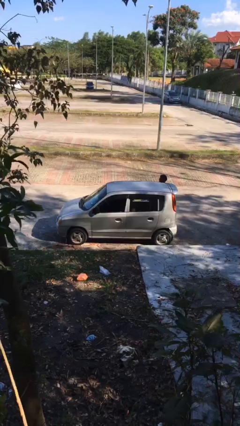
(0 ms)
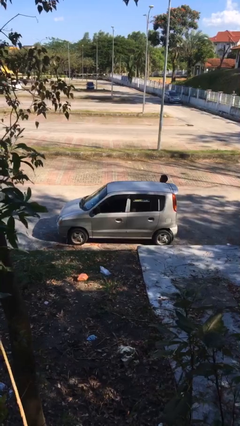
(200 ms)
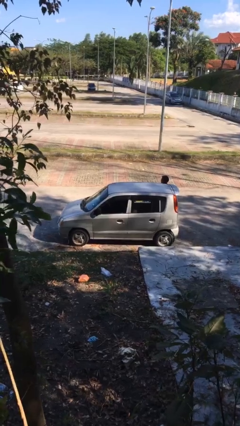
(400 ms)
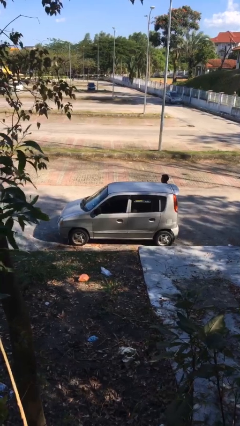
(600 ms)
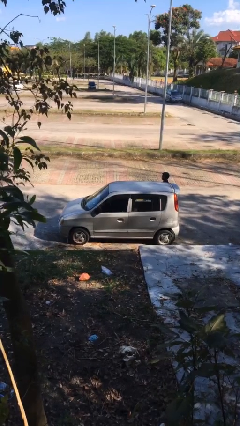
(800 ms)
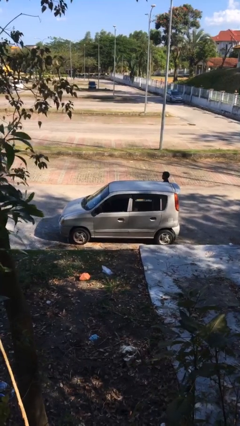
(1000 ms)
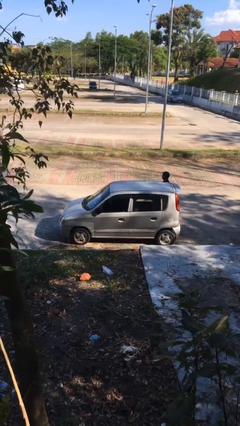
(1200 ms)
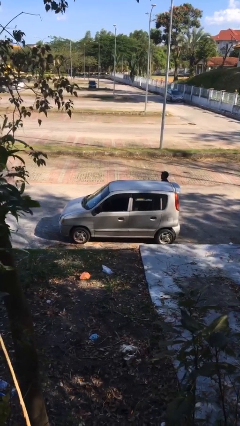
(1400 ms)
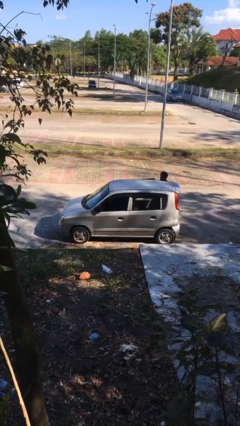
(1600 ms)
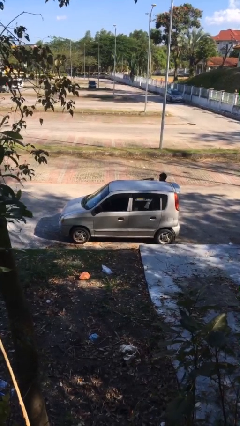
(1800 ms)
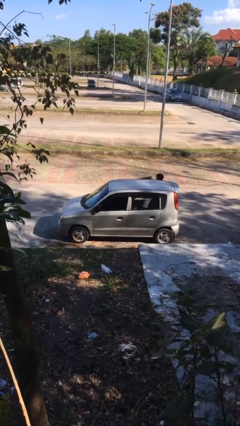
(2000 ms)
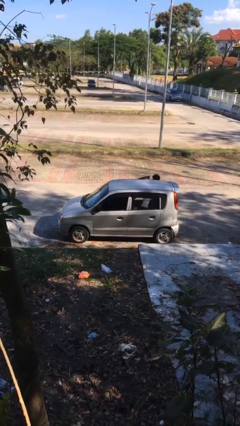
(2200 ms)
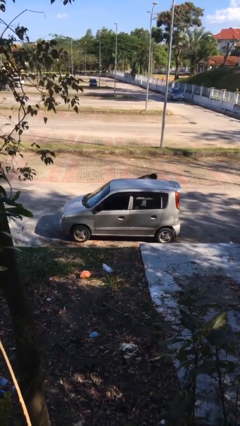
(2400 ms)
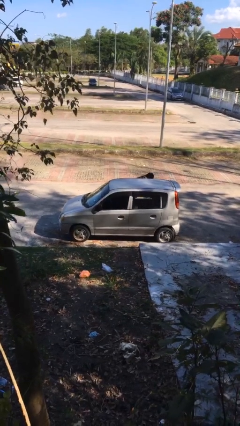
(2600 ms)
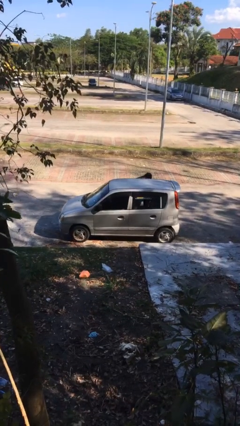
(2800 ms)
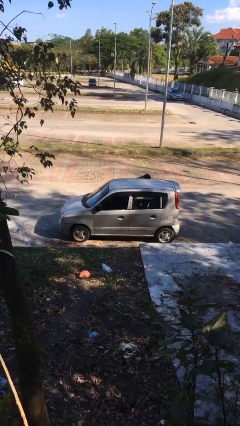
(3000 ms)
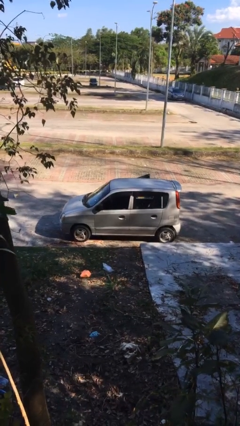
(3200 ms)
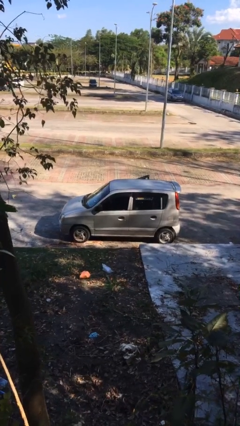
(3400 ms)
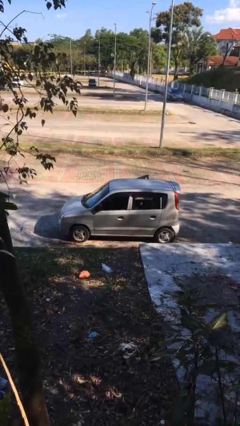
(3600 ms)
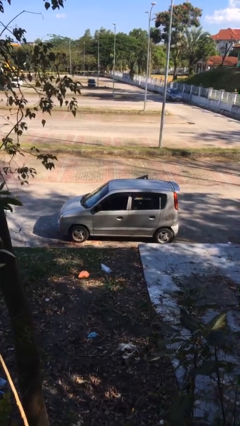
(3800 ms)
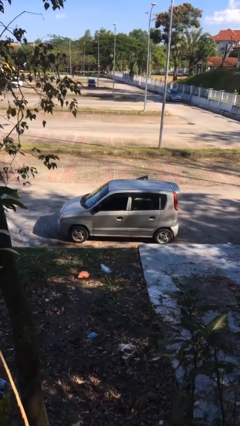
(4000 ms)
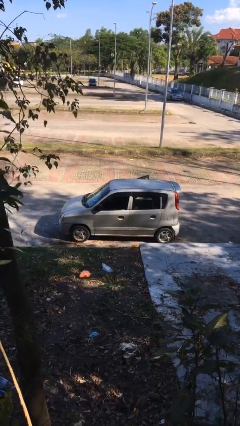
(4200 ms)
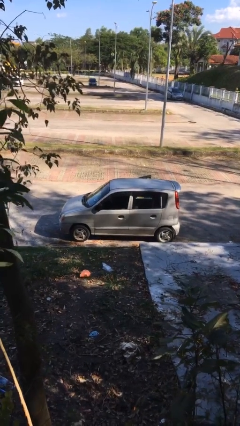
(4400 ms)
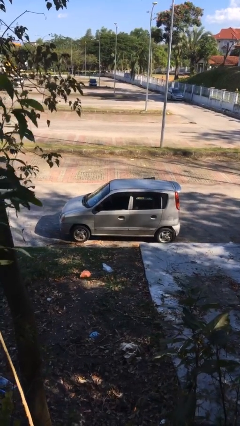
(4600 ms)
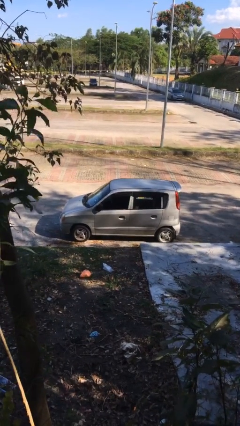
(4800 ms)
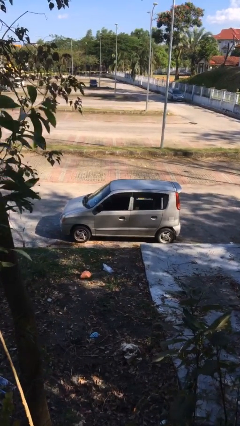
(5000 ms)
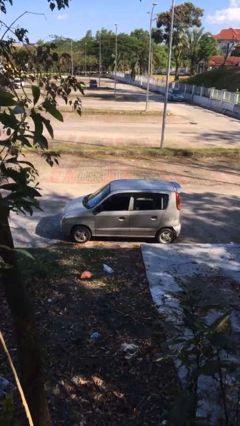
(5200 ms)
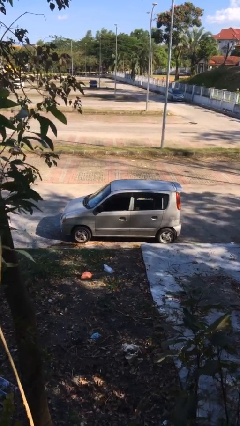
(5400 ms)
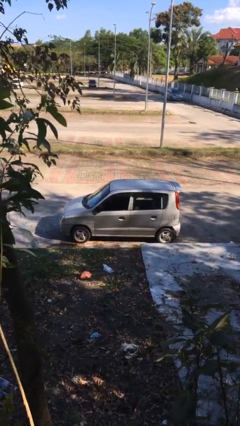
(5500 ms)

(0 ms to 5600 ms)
car picks up person

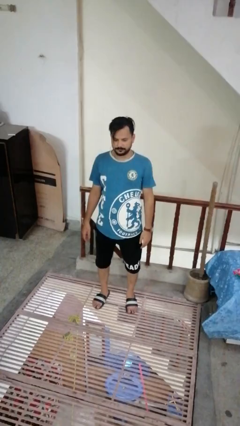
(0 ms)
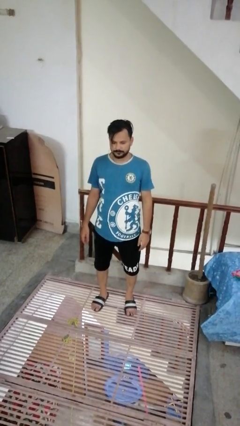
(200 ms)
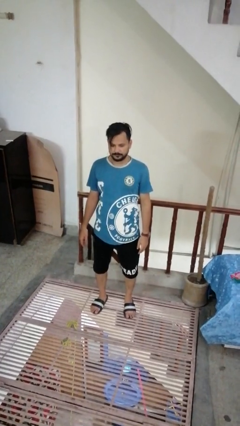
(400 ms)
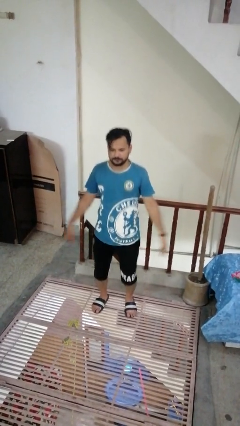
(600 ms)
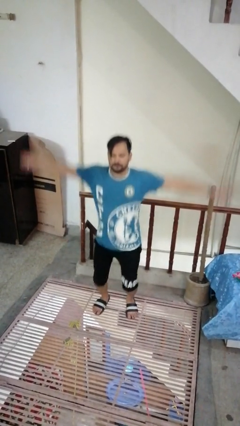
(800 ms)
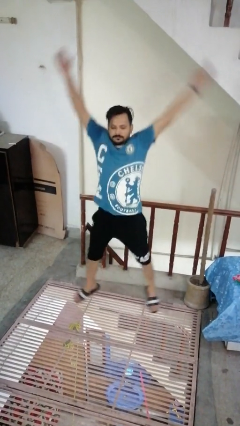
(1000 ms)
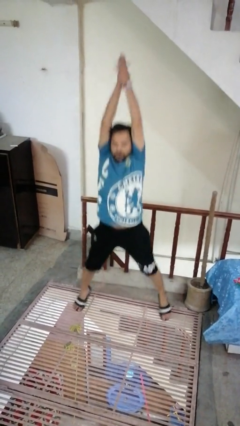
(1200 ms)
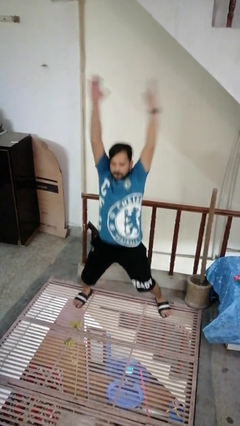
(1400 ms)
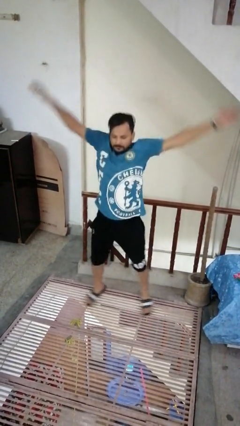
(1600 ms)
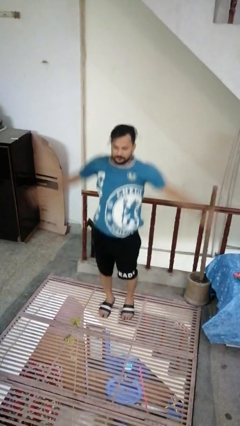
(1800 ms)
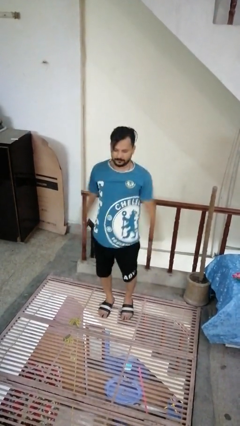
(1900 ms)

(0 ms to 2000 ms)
person exercises with jumping jacks

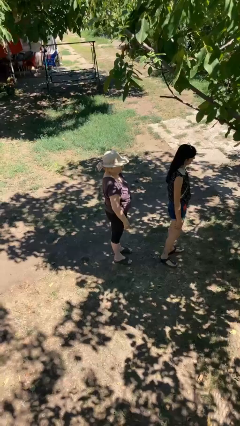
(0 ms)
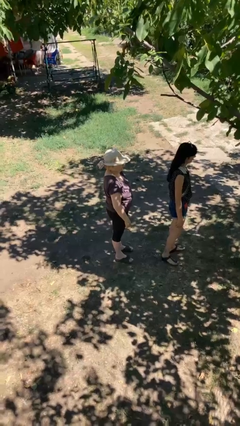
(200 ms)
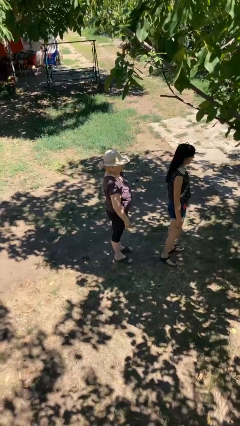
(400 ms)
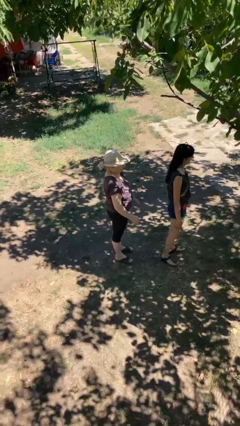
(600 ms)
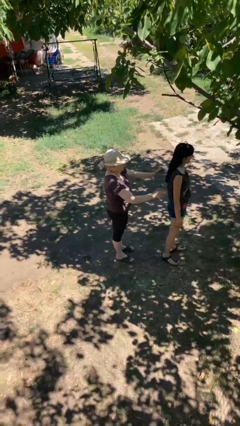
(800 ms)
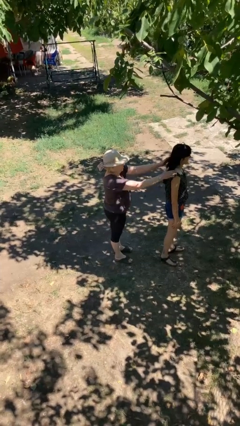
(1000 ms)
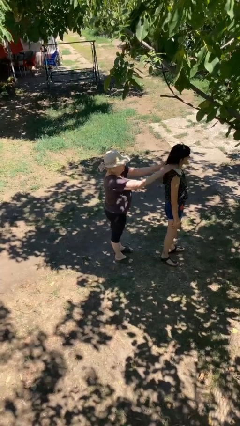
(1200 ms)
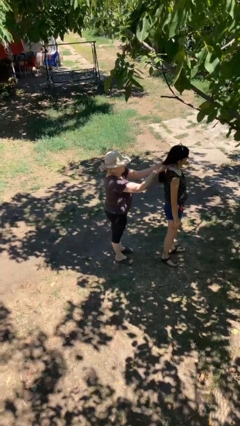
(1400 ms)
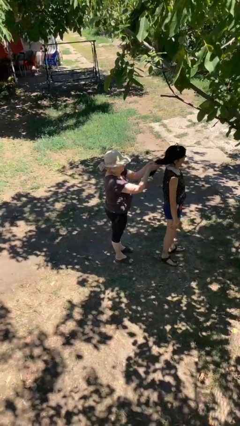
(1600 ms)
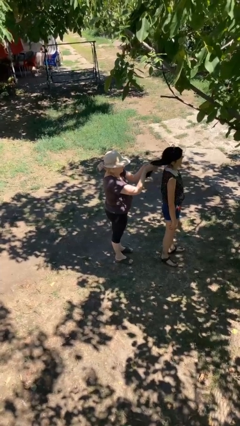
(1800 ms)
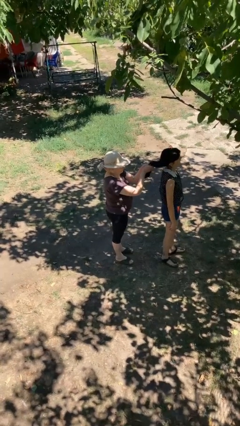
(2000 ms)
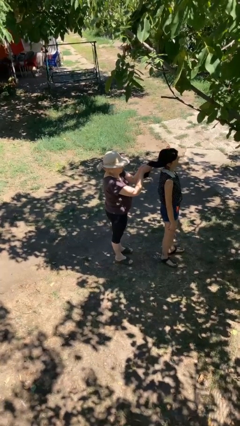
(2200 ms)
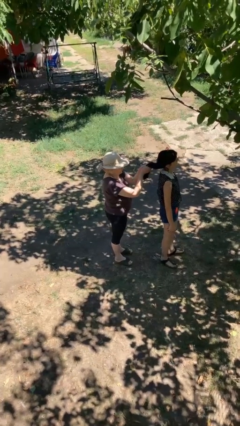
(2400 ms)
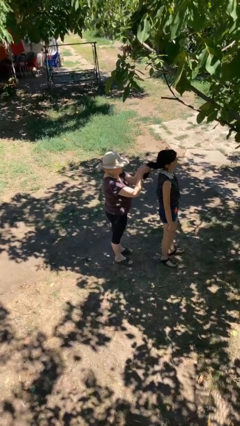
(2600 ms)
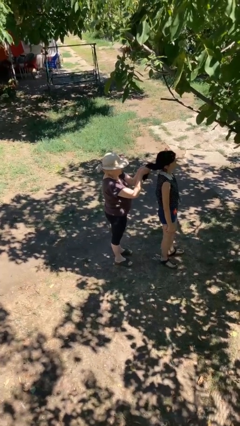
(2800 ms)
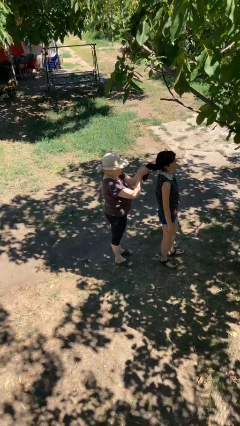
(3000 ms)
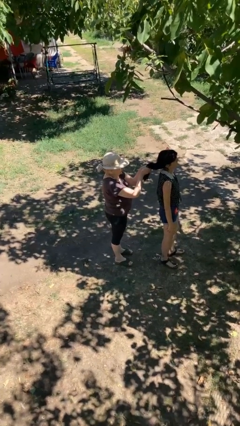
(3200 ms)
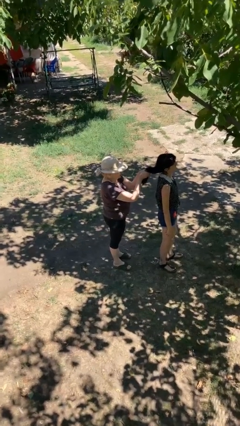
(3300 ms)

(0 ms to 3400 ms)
person grabs person by hair

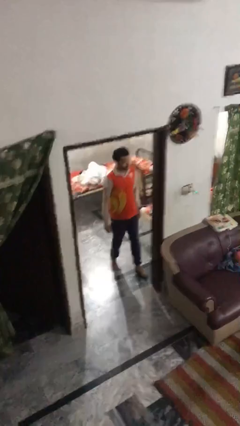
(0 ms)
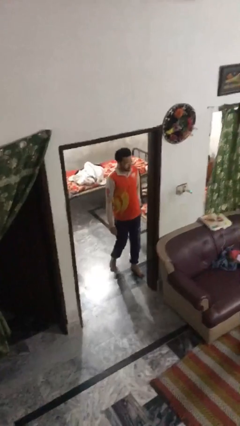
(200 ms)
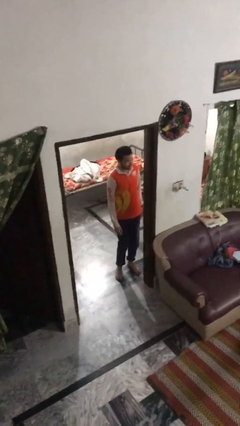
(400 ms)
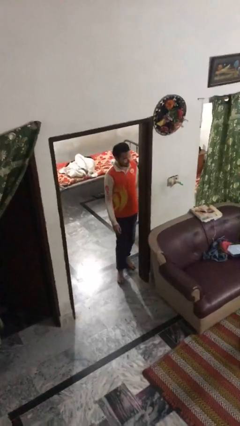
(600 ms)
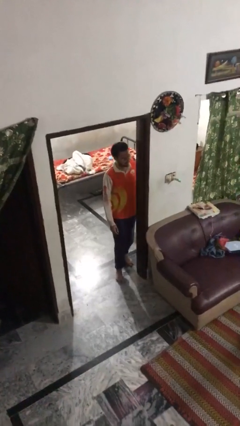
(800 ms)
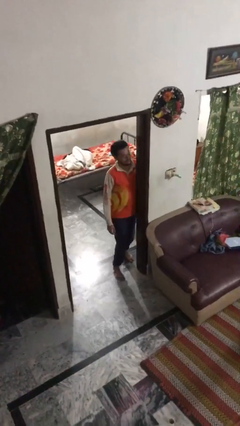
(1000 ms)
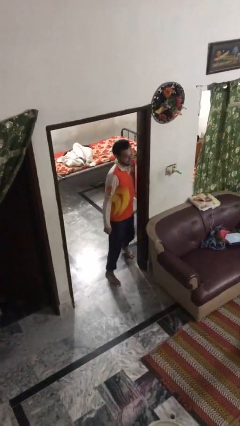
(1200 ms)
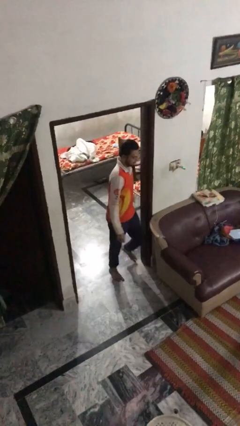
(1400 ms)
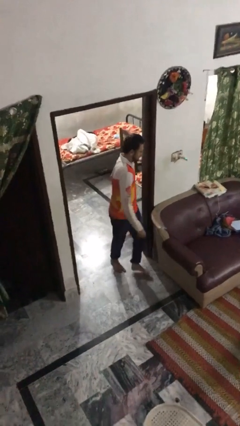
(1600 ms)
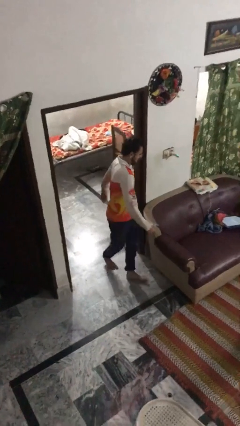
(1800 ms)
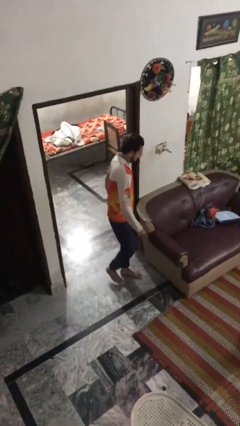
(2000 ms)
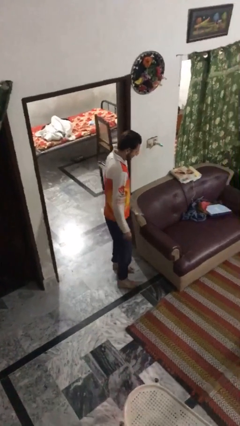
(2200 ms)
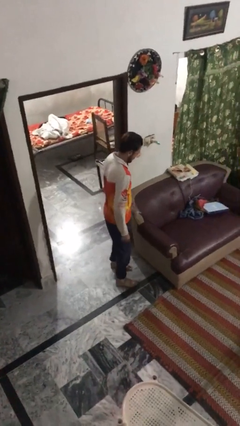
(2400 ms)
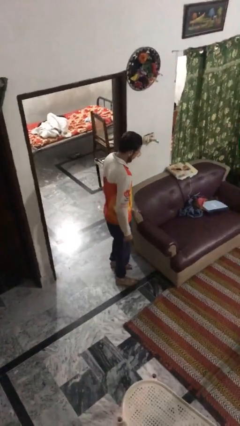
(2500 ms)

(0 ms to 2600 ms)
person bumps into wall

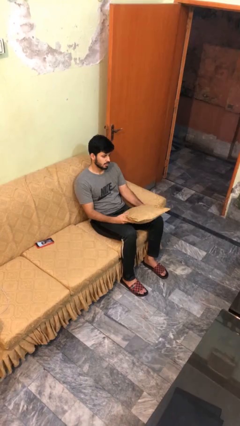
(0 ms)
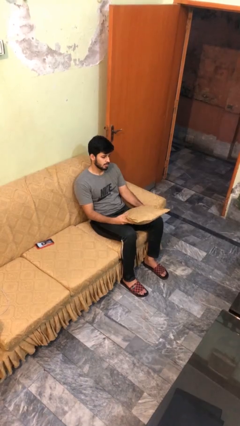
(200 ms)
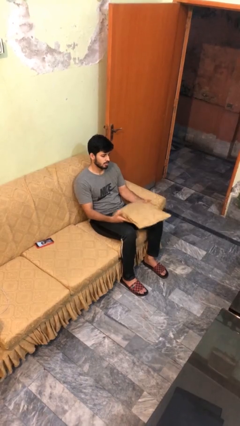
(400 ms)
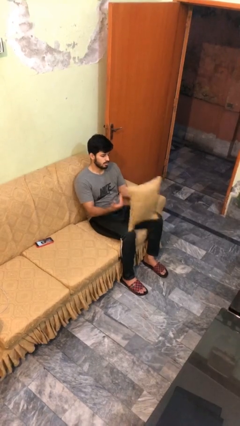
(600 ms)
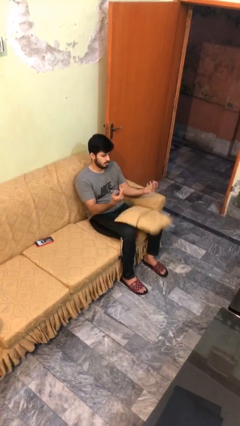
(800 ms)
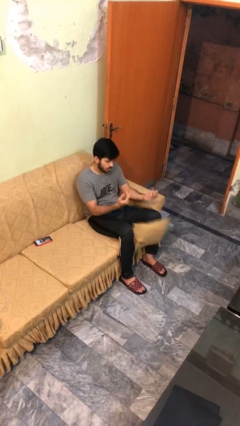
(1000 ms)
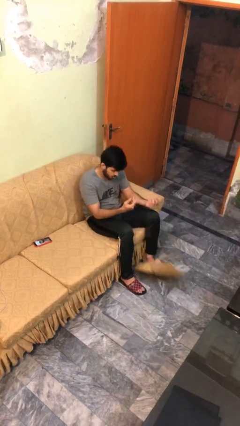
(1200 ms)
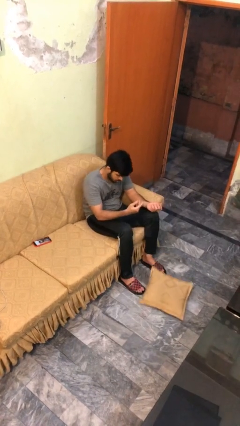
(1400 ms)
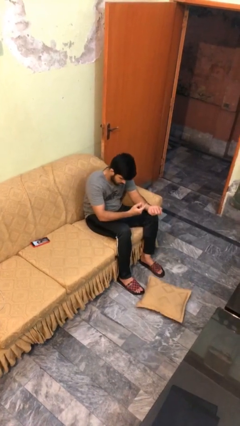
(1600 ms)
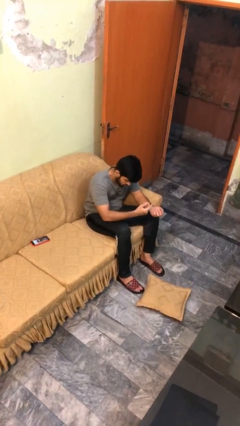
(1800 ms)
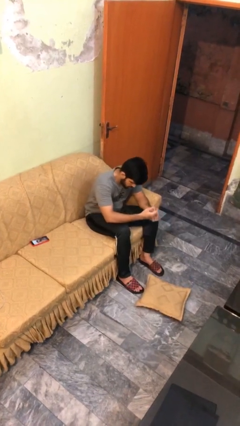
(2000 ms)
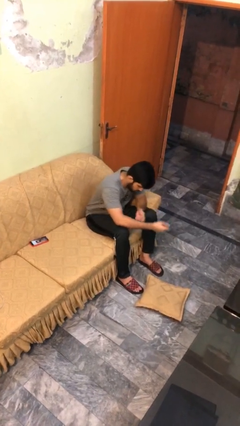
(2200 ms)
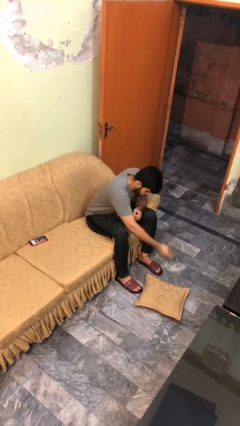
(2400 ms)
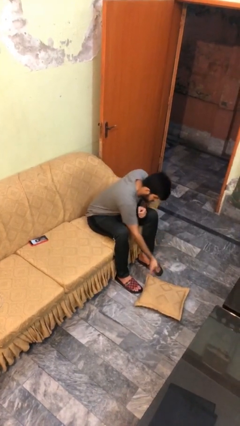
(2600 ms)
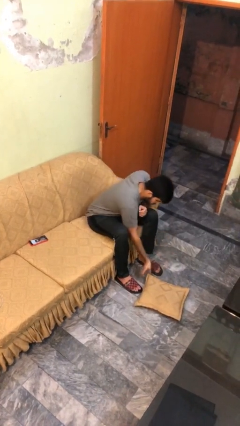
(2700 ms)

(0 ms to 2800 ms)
person drops object

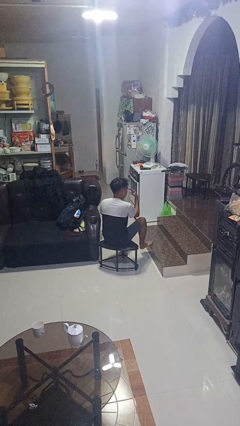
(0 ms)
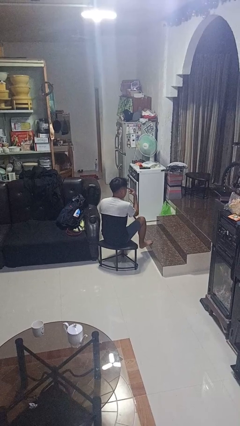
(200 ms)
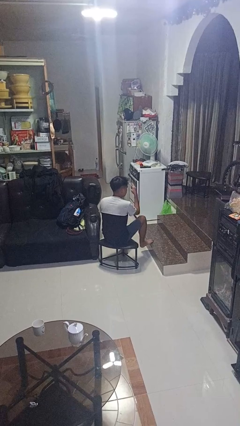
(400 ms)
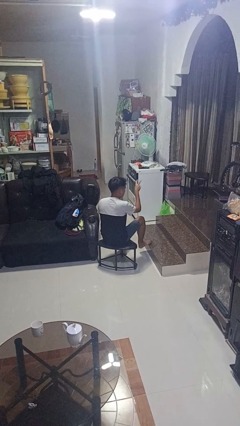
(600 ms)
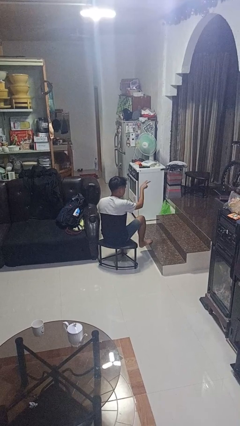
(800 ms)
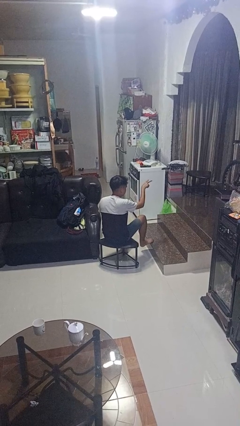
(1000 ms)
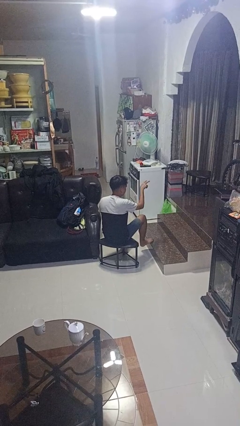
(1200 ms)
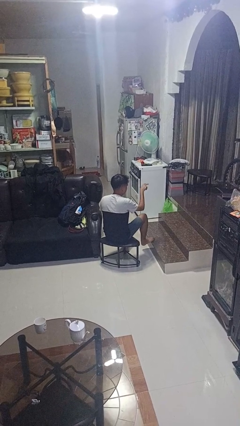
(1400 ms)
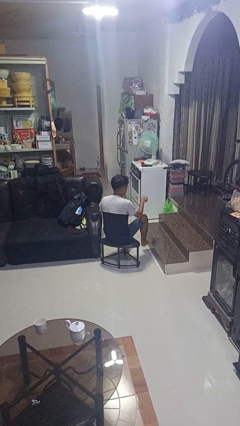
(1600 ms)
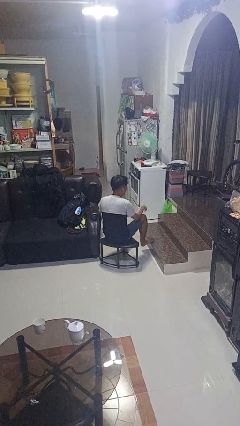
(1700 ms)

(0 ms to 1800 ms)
person gestures watch closely
